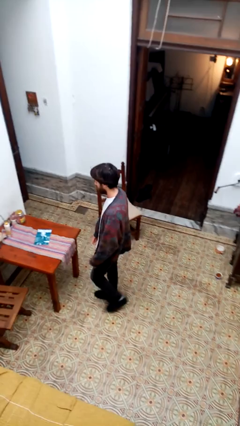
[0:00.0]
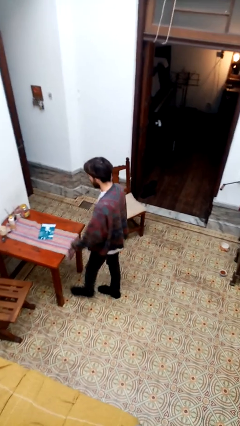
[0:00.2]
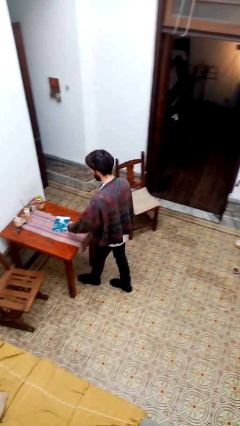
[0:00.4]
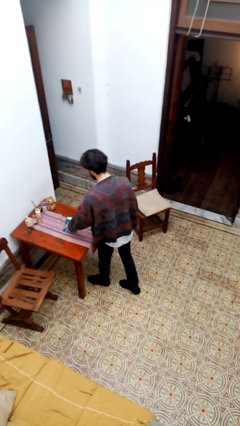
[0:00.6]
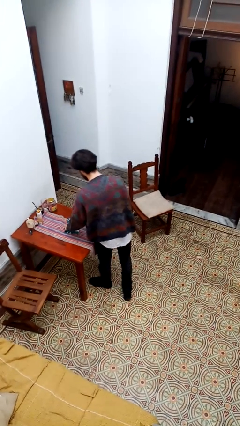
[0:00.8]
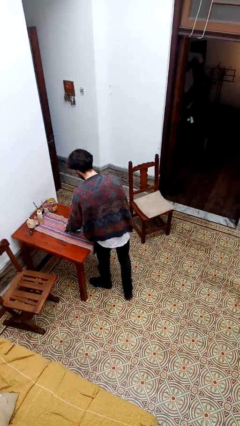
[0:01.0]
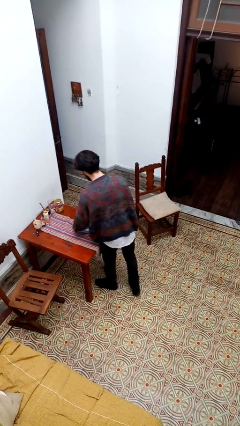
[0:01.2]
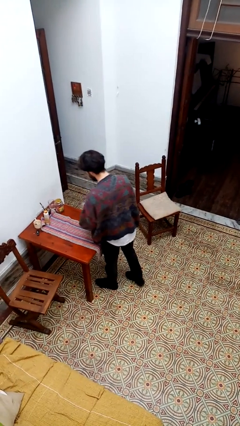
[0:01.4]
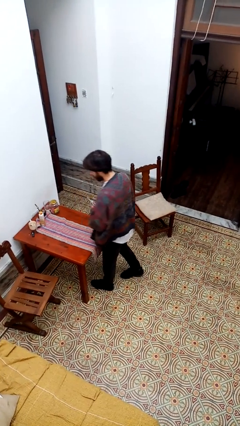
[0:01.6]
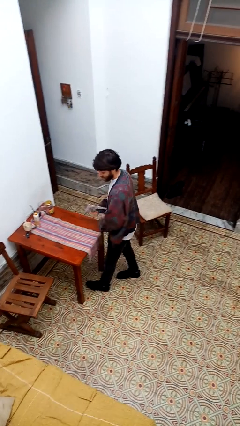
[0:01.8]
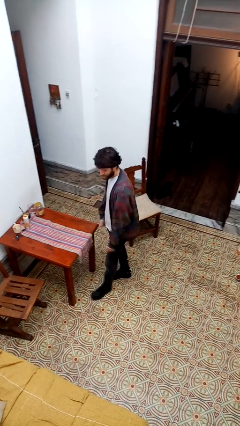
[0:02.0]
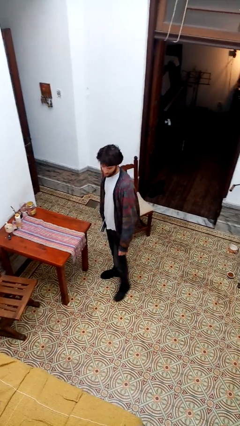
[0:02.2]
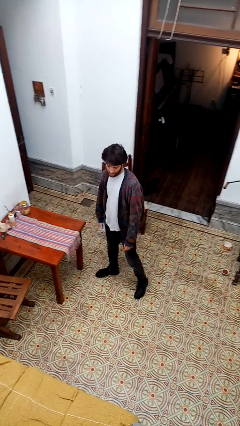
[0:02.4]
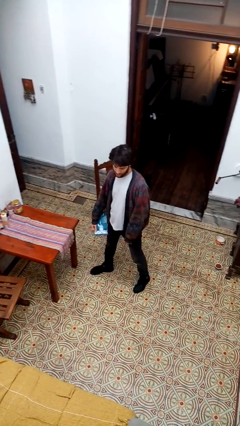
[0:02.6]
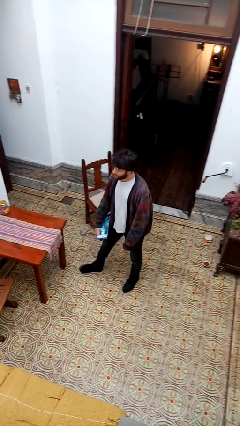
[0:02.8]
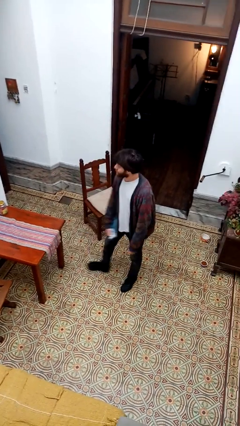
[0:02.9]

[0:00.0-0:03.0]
person picks up object from table

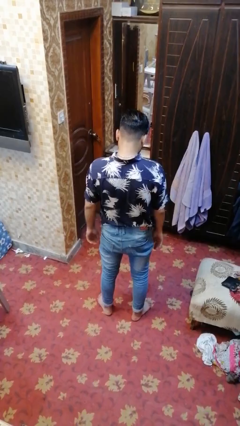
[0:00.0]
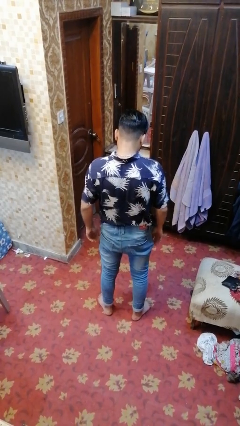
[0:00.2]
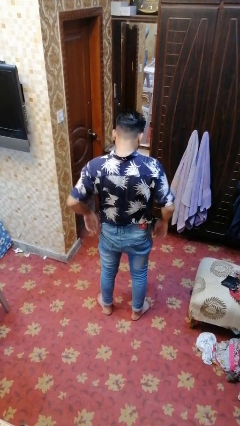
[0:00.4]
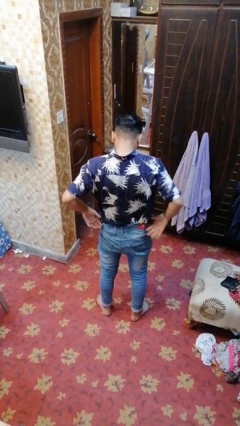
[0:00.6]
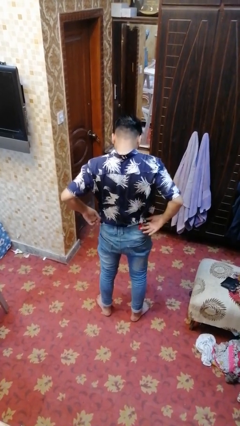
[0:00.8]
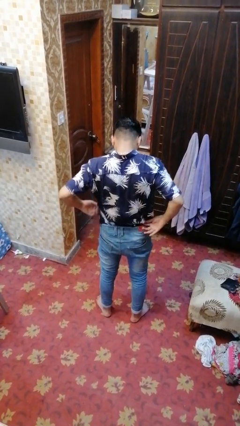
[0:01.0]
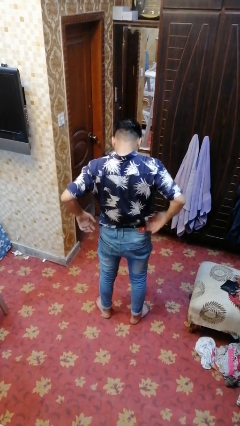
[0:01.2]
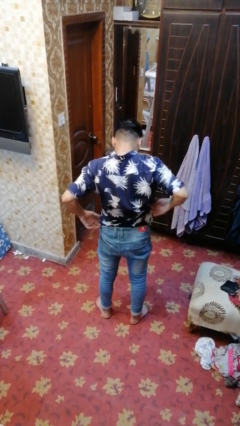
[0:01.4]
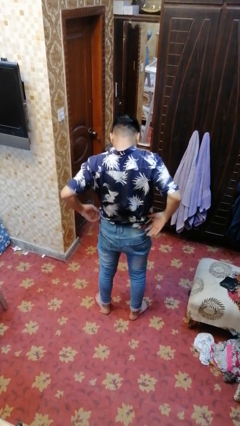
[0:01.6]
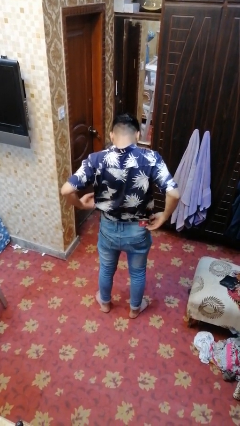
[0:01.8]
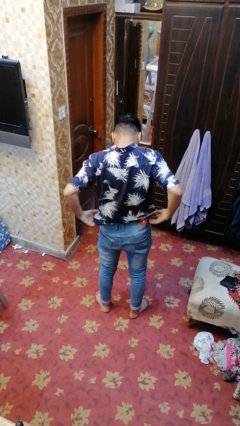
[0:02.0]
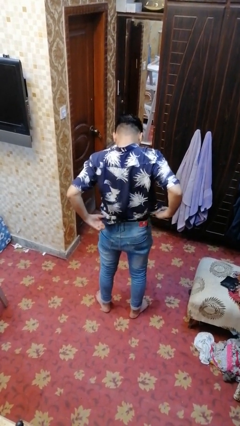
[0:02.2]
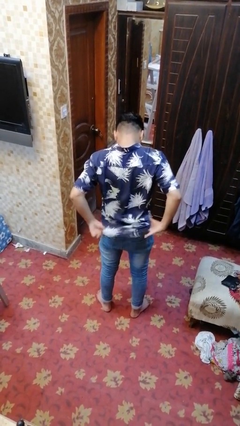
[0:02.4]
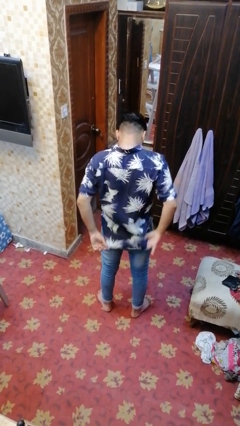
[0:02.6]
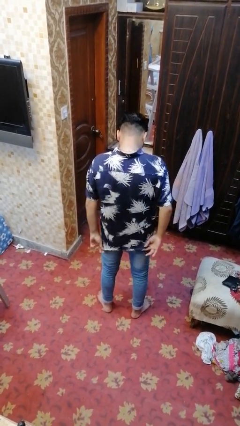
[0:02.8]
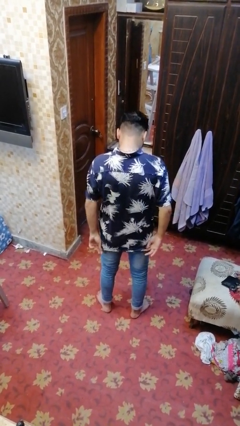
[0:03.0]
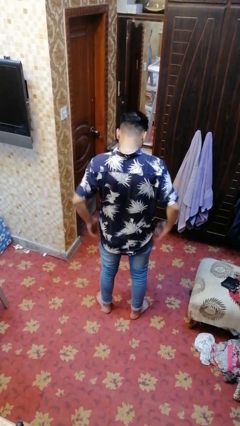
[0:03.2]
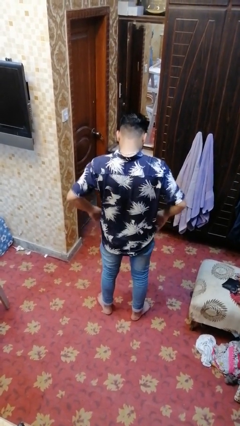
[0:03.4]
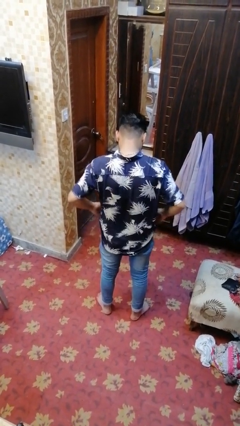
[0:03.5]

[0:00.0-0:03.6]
person untucks shirt

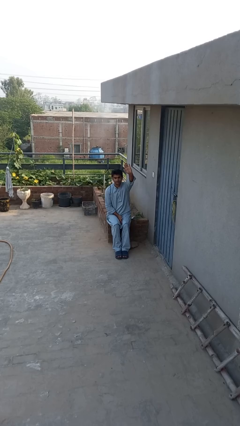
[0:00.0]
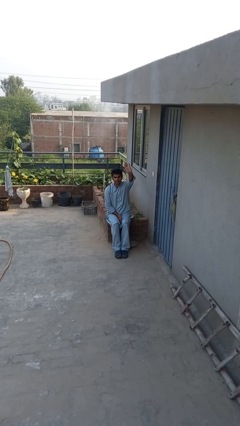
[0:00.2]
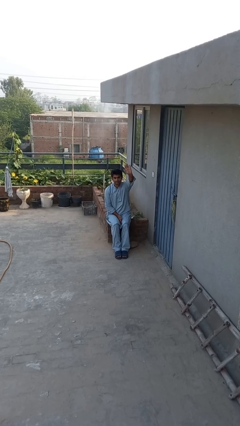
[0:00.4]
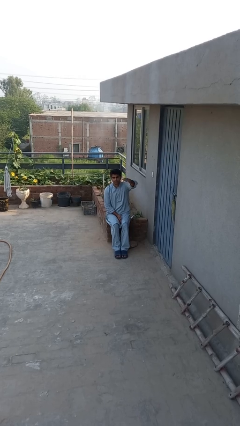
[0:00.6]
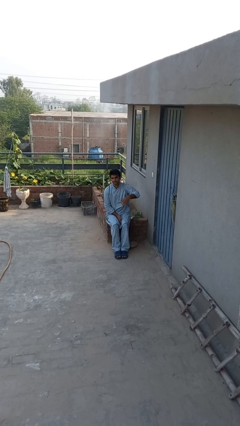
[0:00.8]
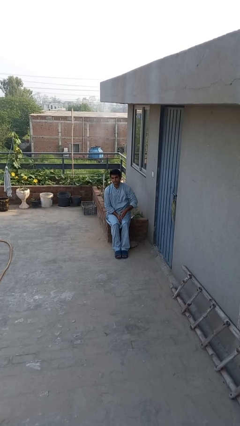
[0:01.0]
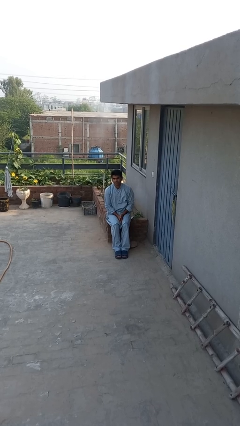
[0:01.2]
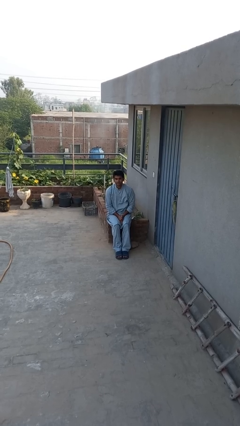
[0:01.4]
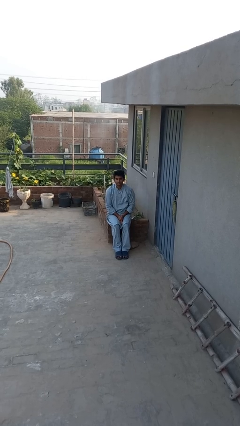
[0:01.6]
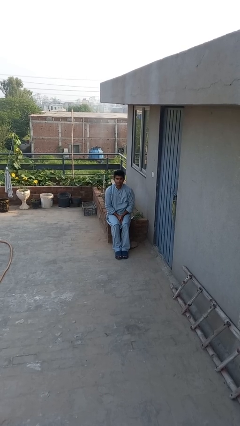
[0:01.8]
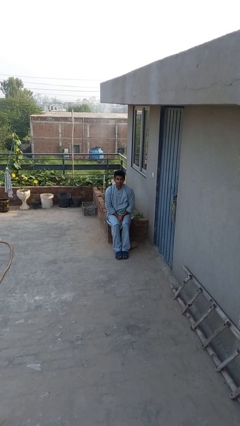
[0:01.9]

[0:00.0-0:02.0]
person gestures lower hand

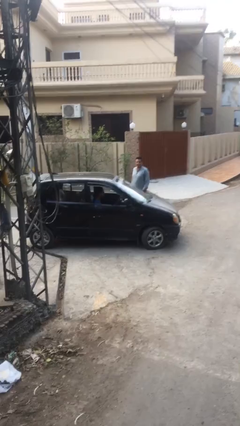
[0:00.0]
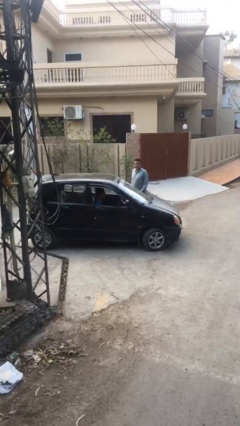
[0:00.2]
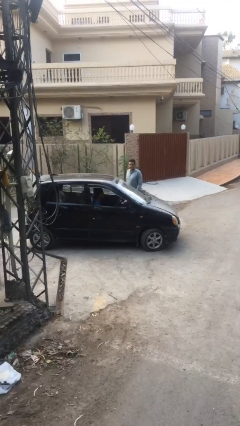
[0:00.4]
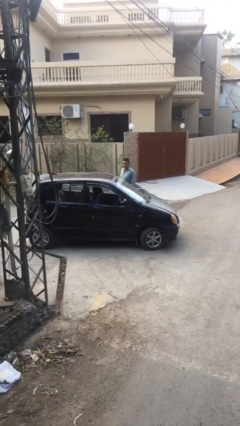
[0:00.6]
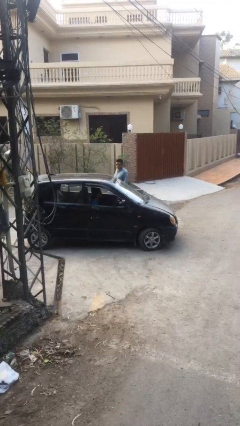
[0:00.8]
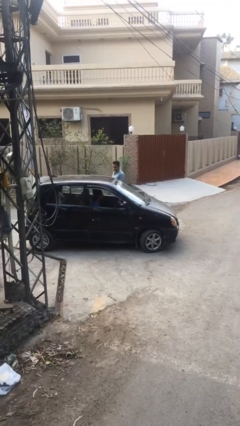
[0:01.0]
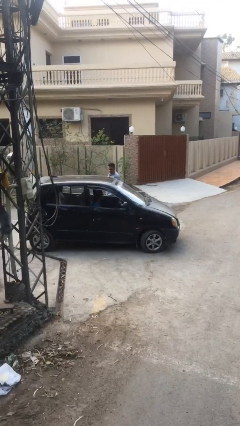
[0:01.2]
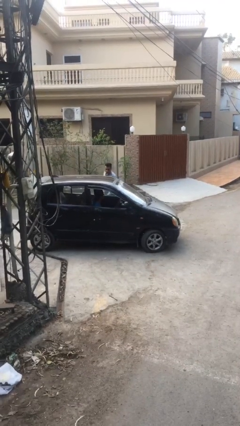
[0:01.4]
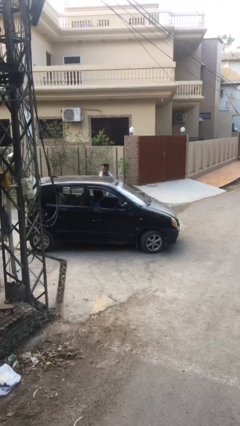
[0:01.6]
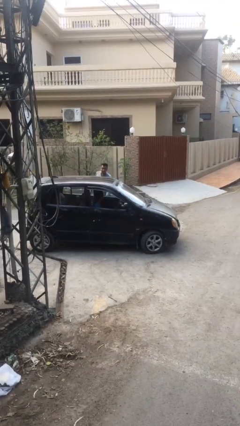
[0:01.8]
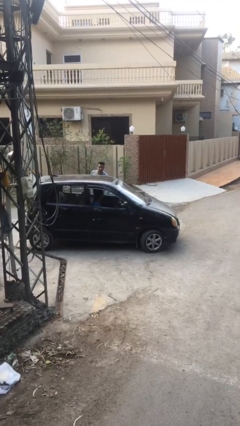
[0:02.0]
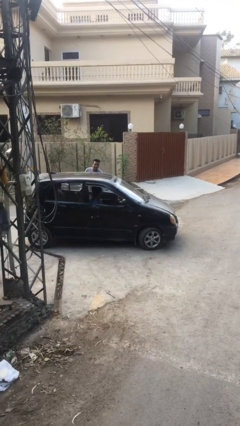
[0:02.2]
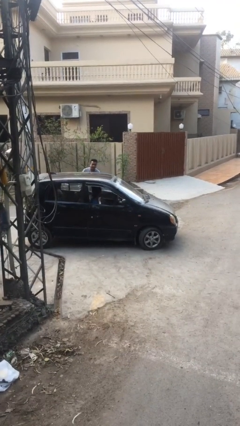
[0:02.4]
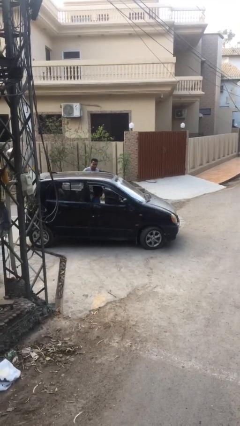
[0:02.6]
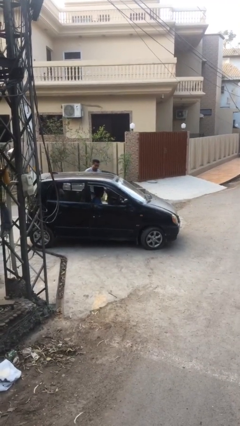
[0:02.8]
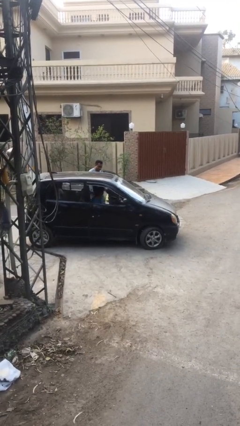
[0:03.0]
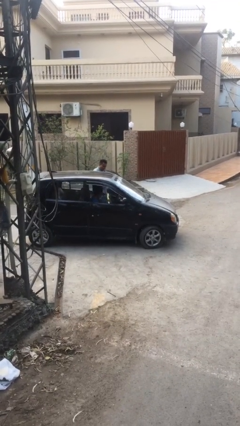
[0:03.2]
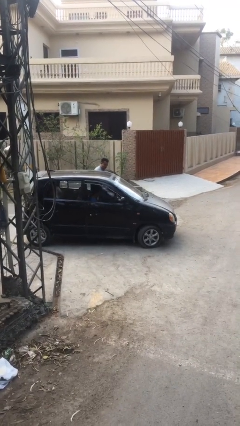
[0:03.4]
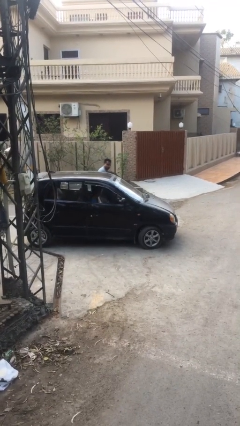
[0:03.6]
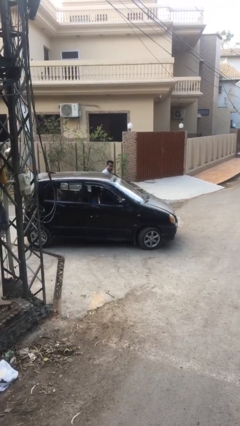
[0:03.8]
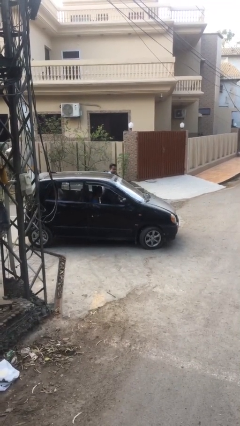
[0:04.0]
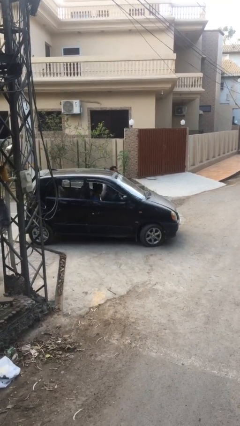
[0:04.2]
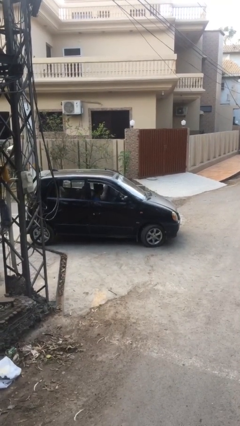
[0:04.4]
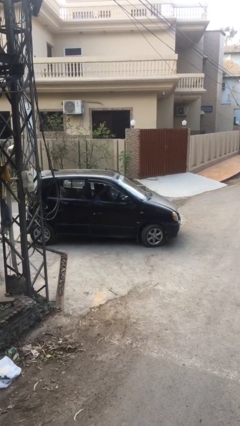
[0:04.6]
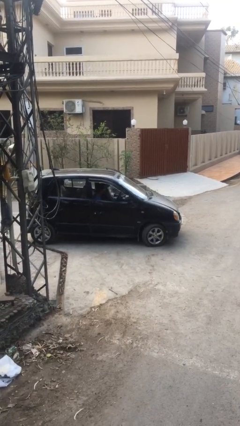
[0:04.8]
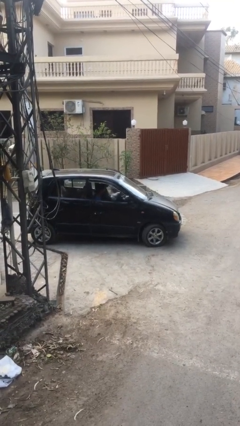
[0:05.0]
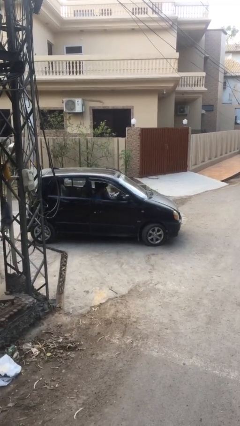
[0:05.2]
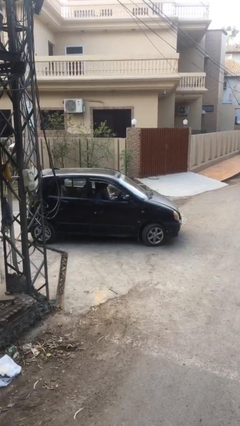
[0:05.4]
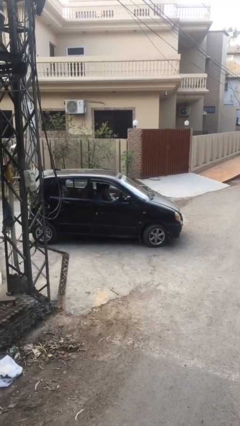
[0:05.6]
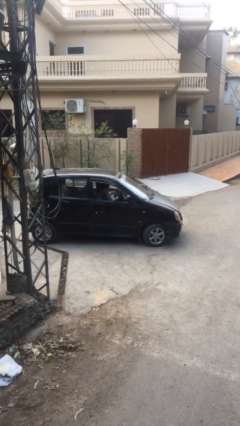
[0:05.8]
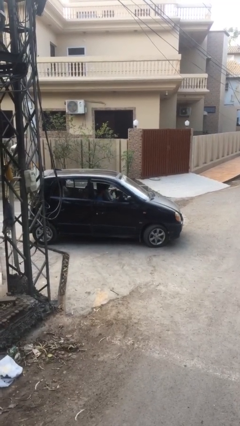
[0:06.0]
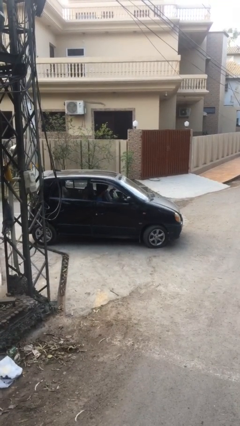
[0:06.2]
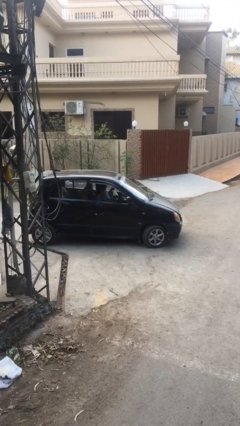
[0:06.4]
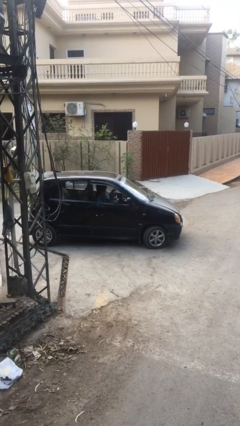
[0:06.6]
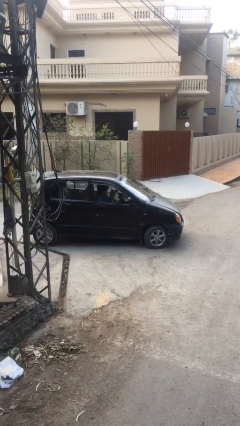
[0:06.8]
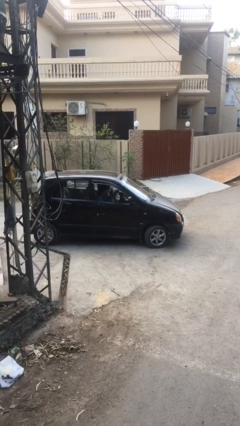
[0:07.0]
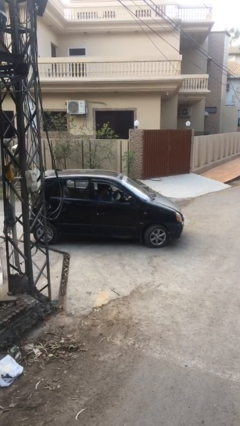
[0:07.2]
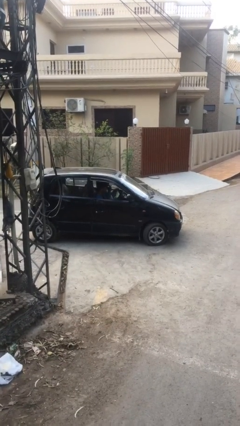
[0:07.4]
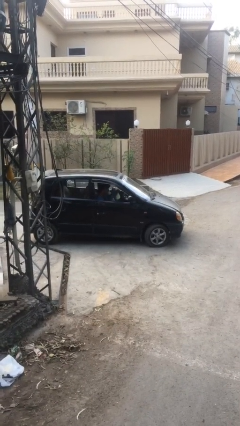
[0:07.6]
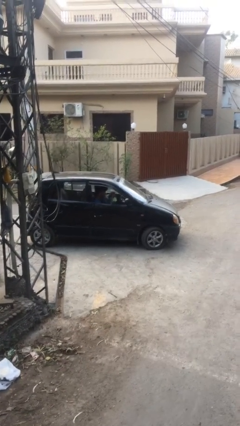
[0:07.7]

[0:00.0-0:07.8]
car picks up person

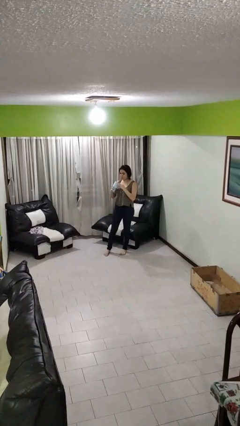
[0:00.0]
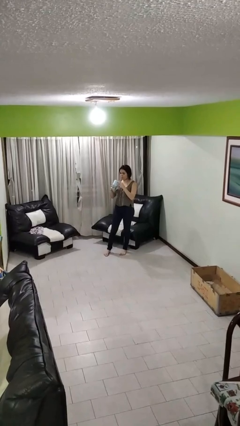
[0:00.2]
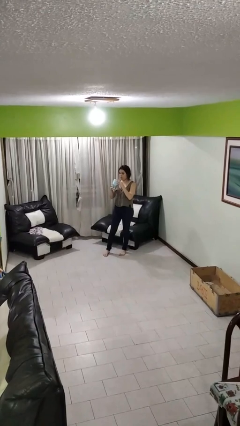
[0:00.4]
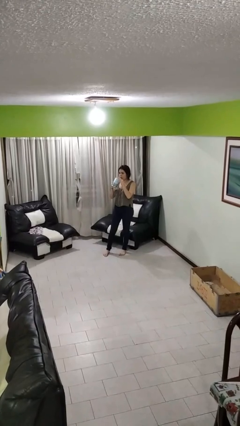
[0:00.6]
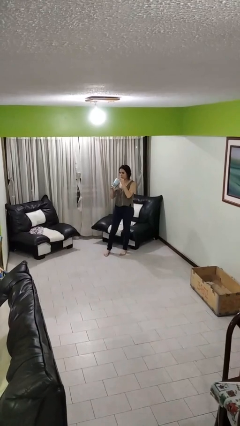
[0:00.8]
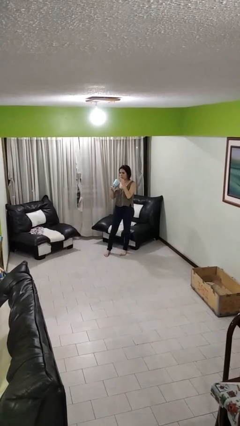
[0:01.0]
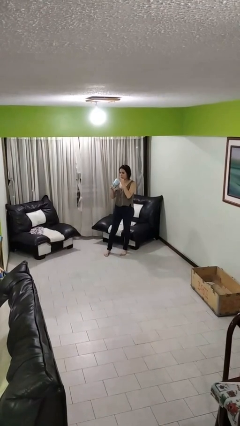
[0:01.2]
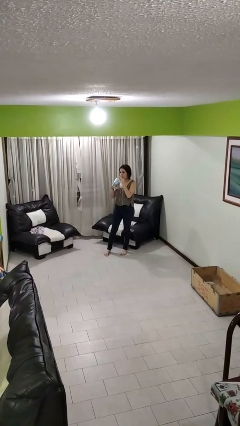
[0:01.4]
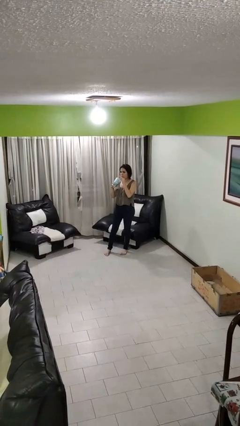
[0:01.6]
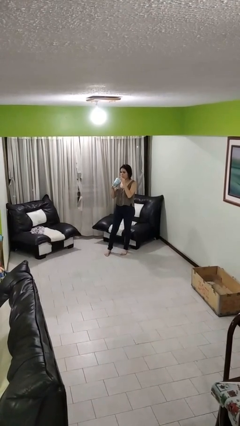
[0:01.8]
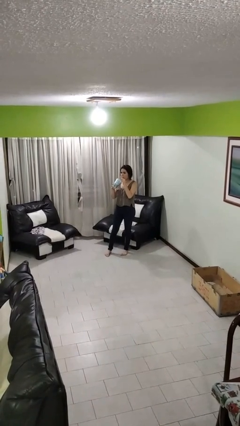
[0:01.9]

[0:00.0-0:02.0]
person drinks from straw
